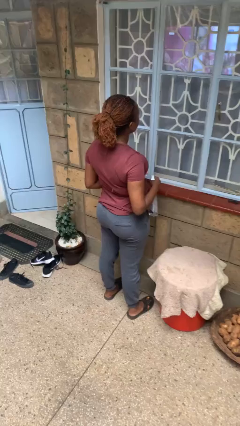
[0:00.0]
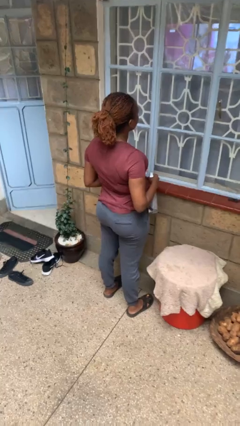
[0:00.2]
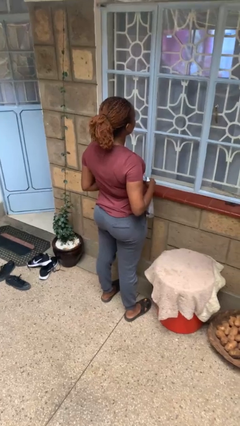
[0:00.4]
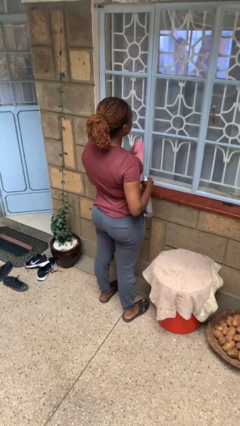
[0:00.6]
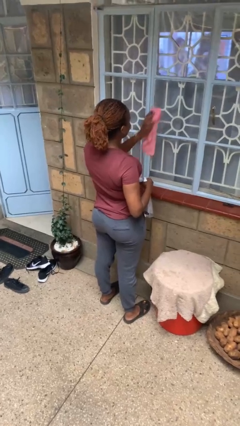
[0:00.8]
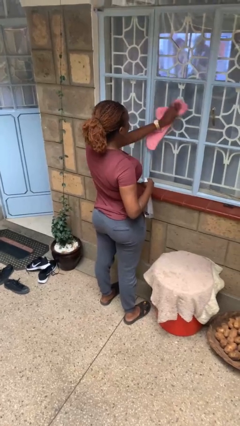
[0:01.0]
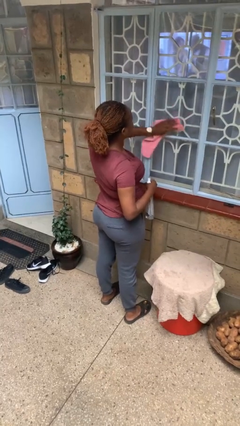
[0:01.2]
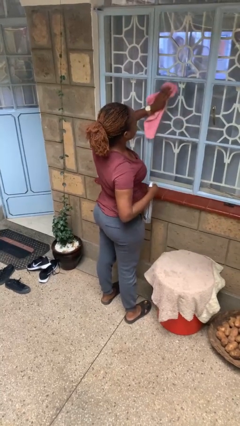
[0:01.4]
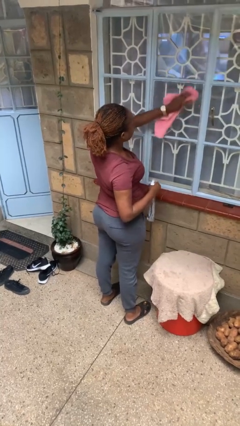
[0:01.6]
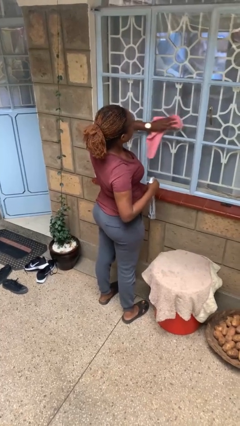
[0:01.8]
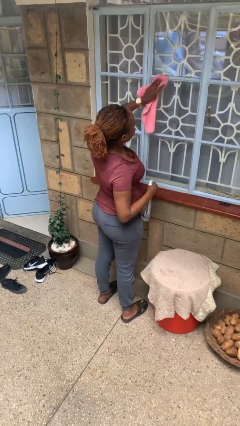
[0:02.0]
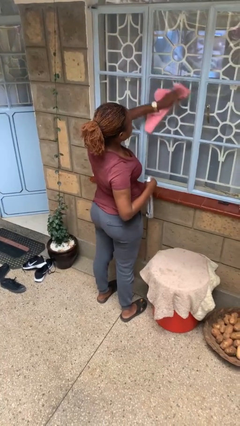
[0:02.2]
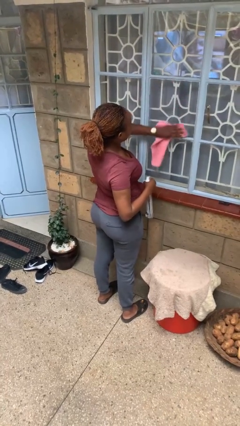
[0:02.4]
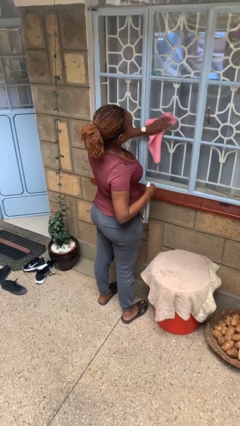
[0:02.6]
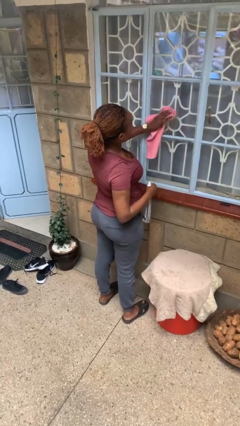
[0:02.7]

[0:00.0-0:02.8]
person washes window

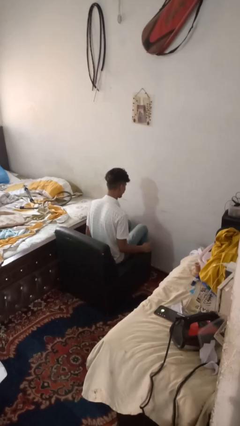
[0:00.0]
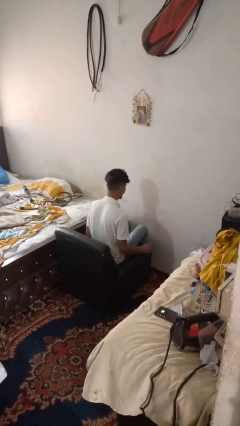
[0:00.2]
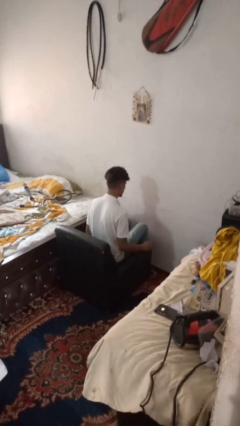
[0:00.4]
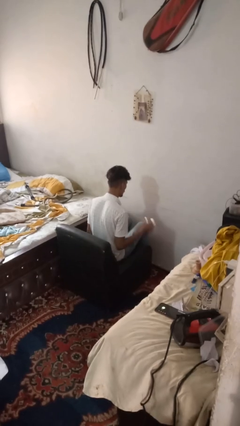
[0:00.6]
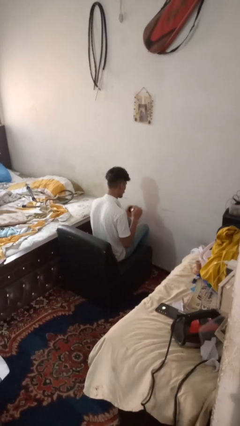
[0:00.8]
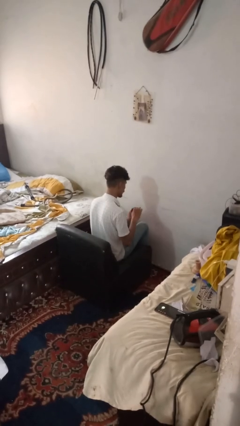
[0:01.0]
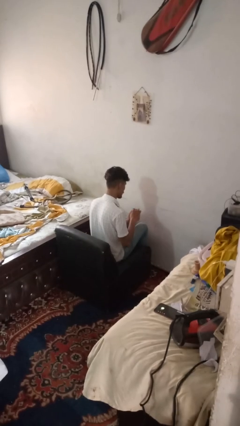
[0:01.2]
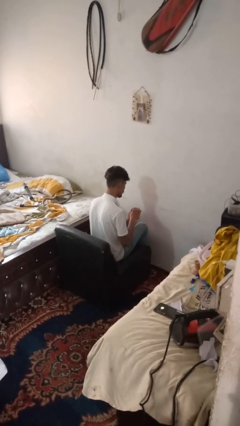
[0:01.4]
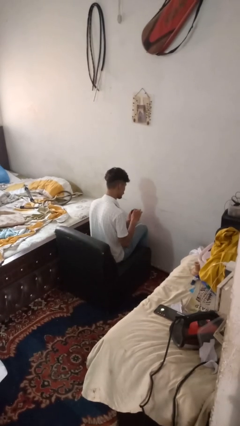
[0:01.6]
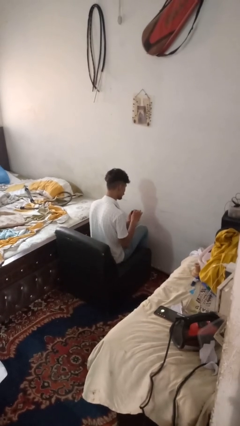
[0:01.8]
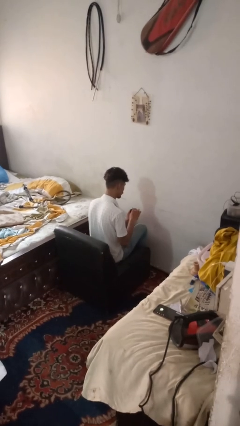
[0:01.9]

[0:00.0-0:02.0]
person stirs mug

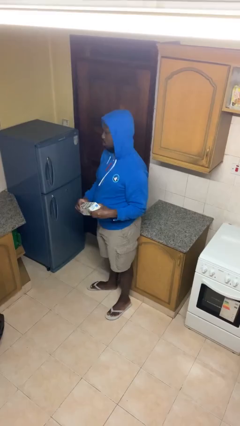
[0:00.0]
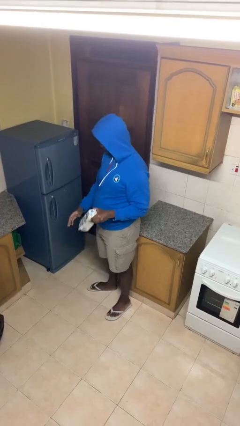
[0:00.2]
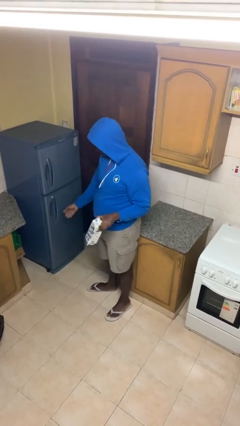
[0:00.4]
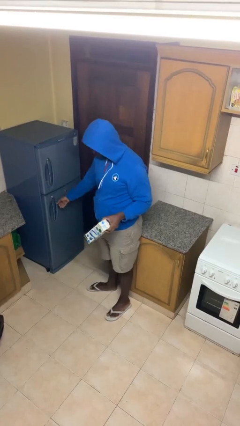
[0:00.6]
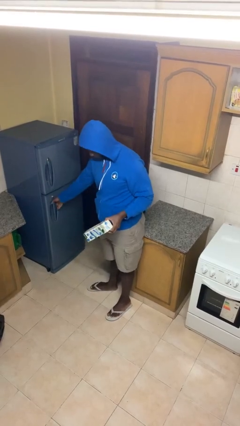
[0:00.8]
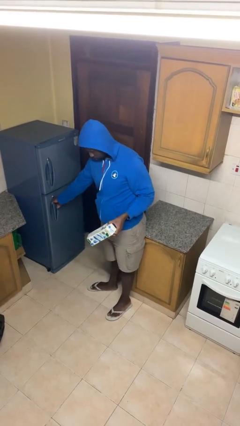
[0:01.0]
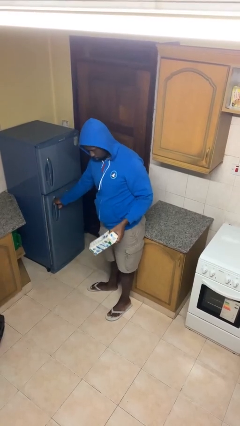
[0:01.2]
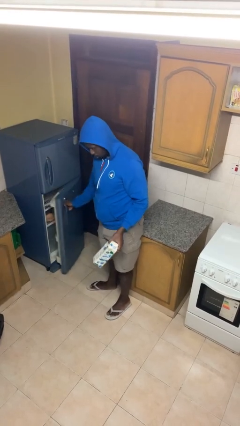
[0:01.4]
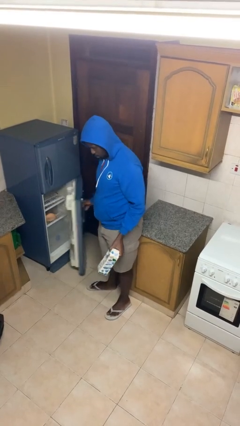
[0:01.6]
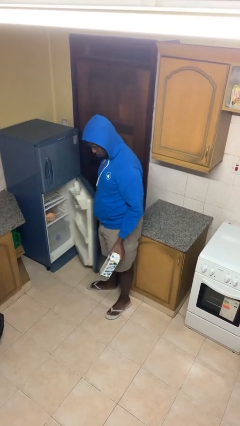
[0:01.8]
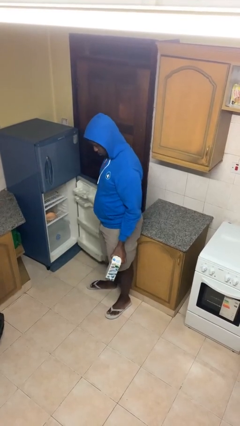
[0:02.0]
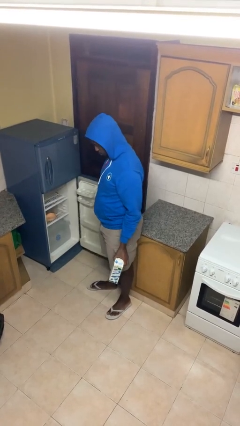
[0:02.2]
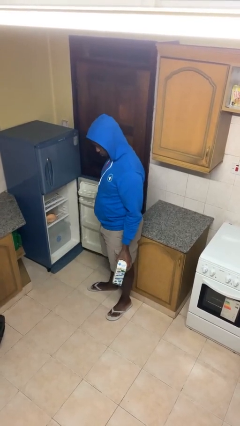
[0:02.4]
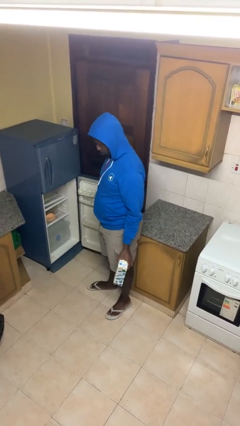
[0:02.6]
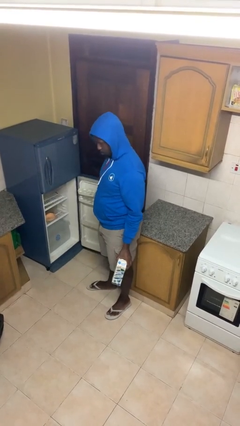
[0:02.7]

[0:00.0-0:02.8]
person opens refrigerator

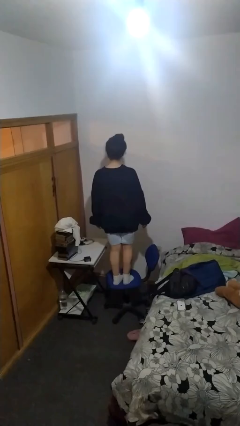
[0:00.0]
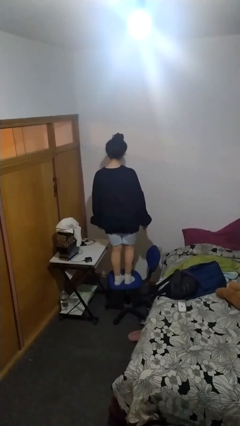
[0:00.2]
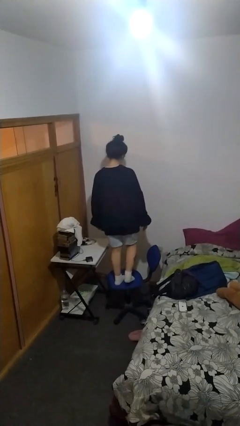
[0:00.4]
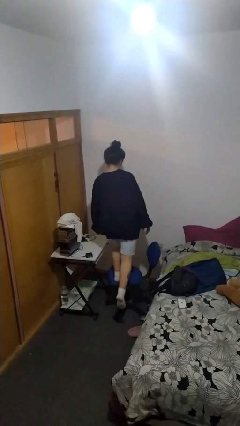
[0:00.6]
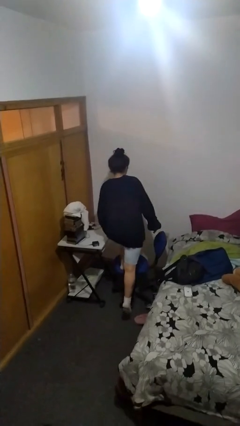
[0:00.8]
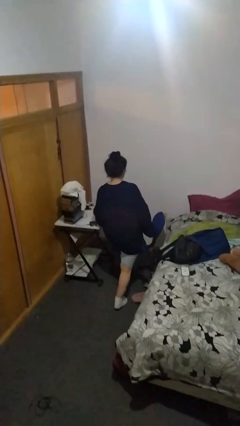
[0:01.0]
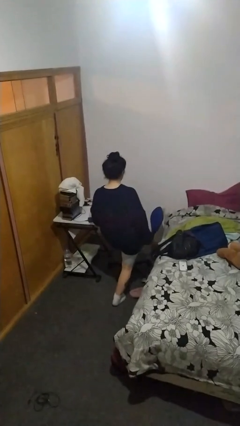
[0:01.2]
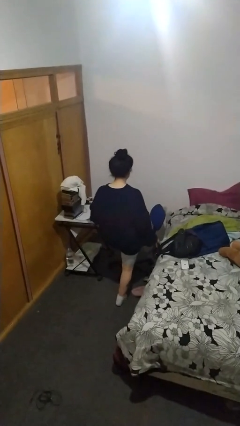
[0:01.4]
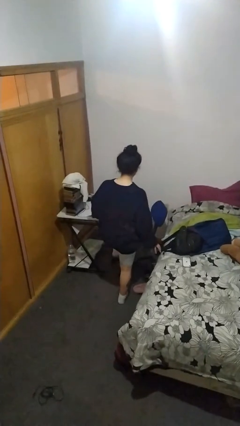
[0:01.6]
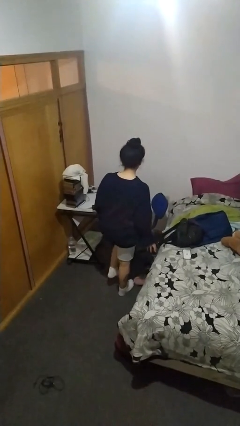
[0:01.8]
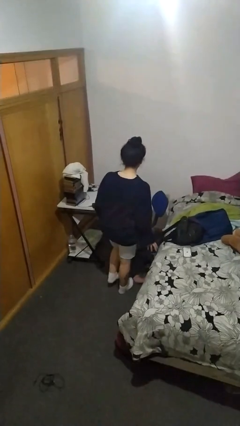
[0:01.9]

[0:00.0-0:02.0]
person climbs off chair

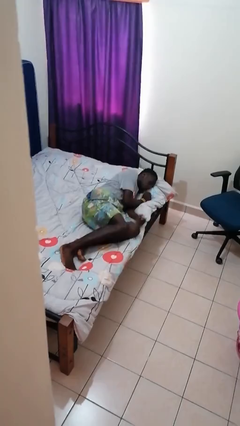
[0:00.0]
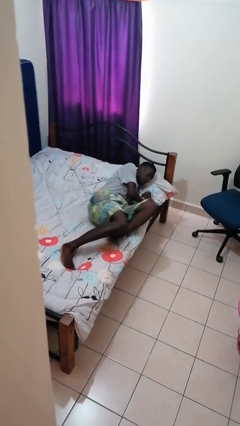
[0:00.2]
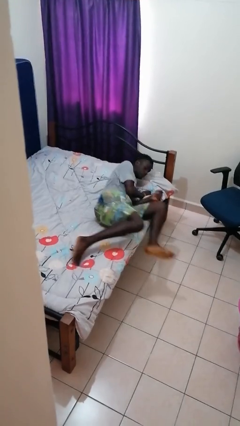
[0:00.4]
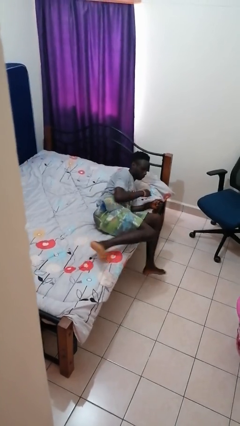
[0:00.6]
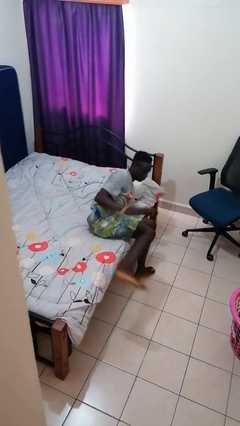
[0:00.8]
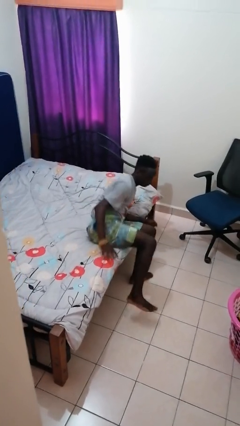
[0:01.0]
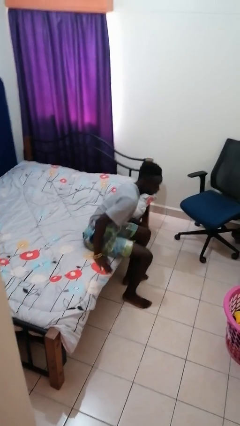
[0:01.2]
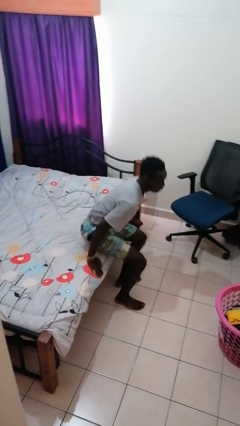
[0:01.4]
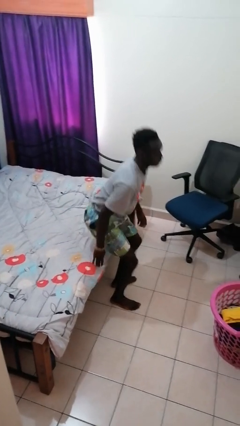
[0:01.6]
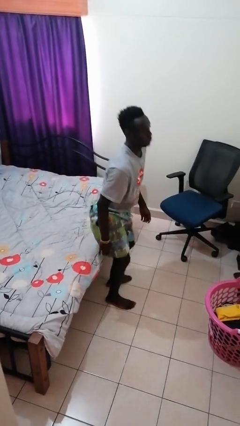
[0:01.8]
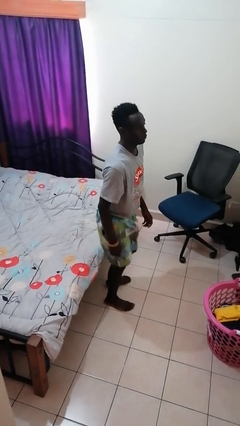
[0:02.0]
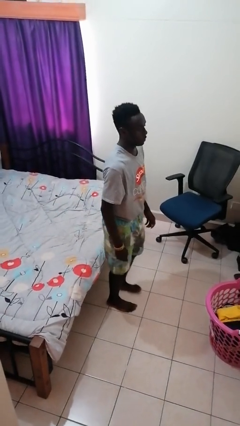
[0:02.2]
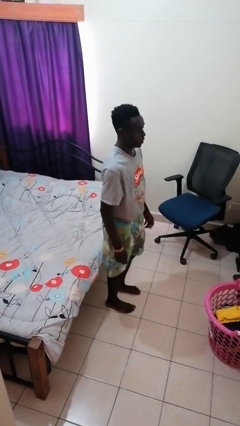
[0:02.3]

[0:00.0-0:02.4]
person stands up

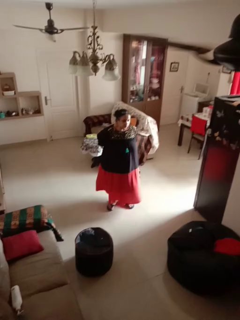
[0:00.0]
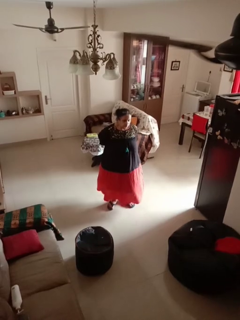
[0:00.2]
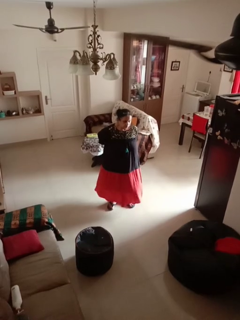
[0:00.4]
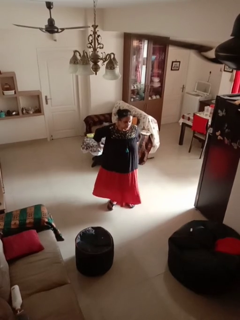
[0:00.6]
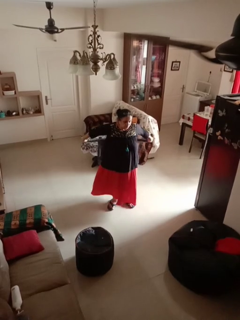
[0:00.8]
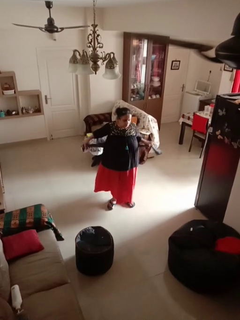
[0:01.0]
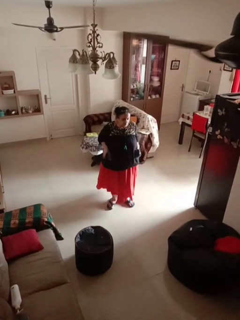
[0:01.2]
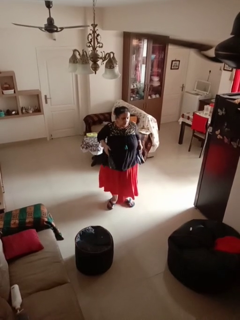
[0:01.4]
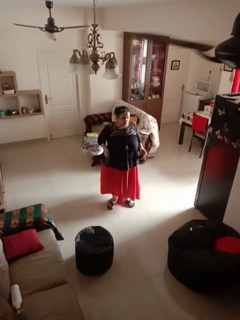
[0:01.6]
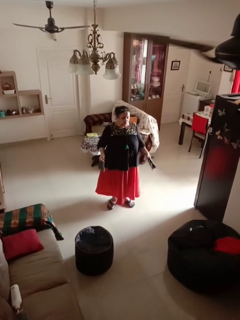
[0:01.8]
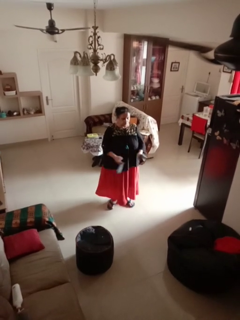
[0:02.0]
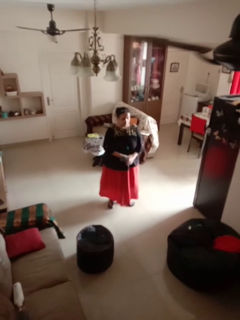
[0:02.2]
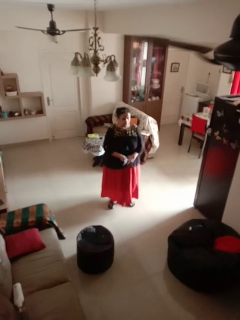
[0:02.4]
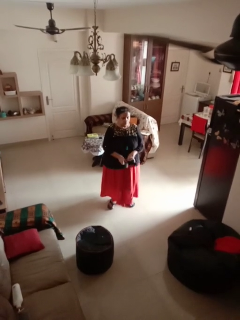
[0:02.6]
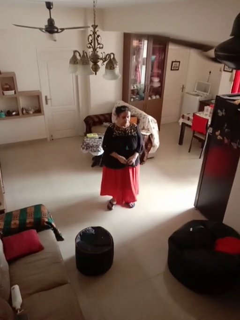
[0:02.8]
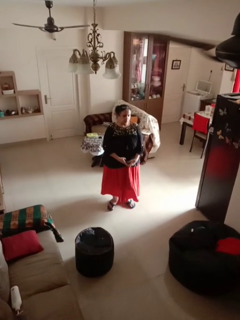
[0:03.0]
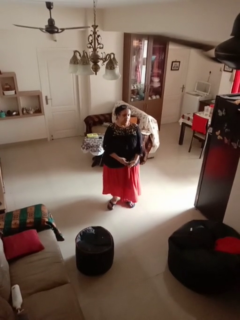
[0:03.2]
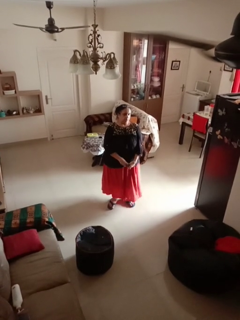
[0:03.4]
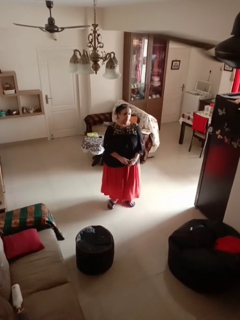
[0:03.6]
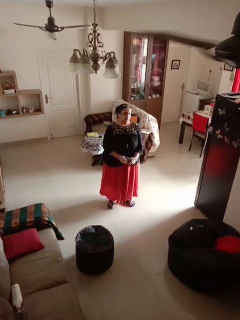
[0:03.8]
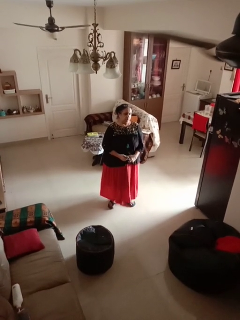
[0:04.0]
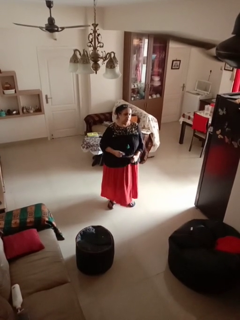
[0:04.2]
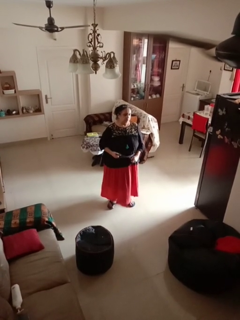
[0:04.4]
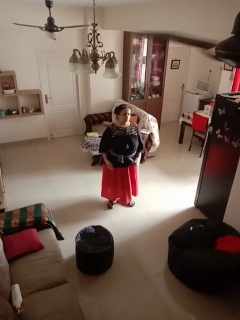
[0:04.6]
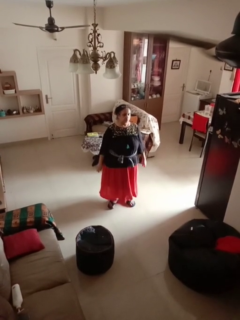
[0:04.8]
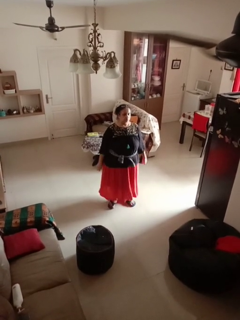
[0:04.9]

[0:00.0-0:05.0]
person ties jacket around waist

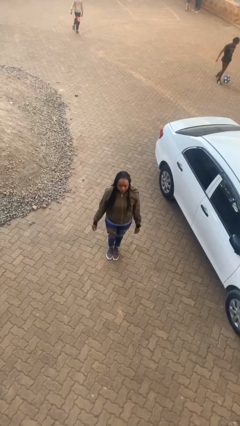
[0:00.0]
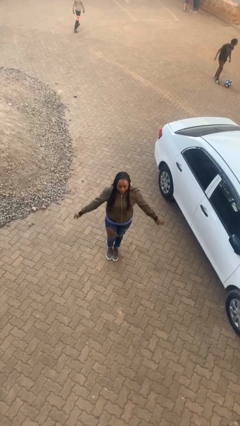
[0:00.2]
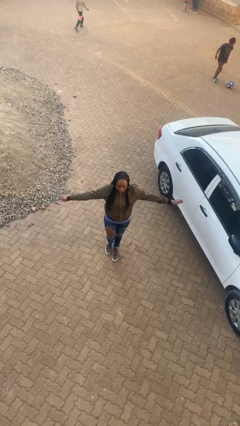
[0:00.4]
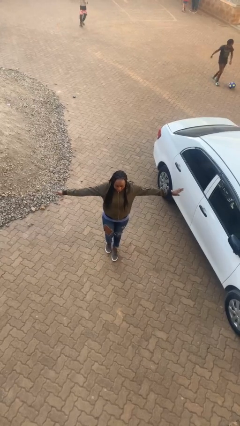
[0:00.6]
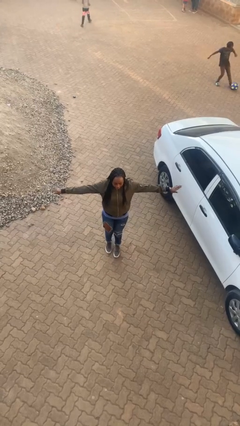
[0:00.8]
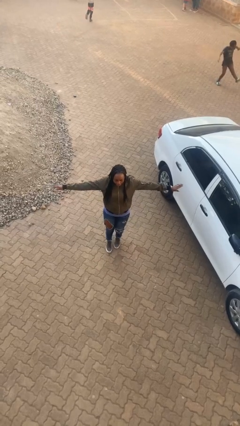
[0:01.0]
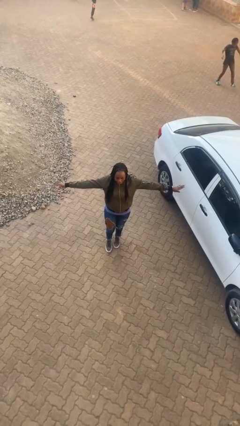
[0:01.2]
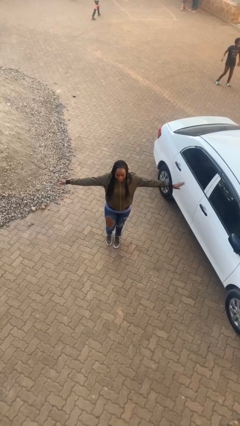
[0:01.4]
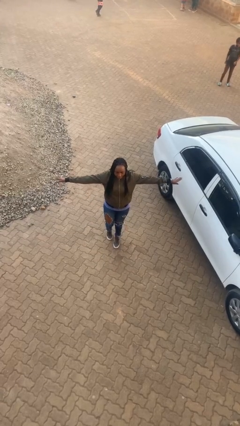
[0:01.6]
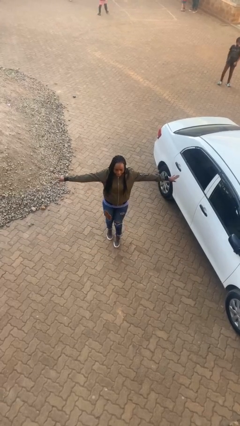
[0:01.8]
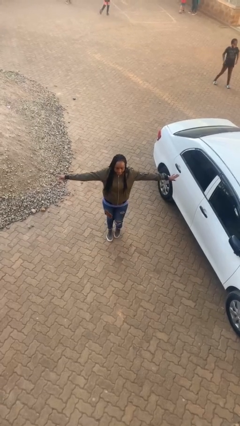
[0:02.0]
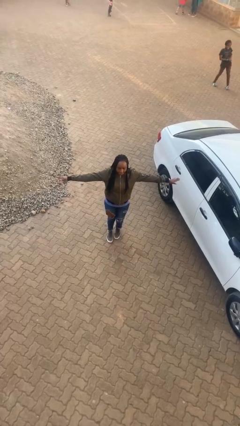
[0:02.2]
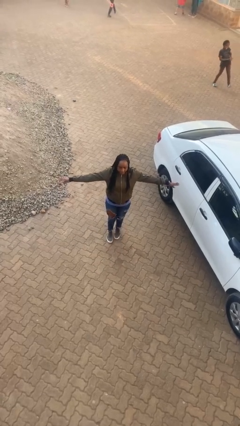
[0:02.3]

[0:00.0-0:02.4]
person walks tiptoe
